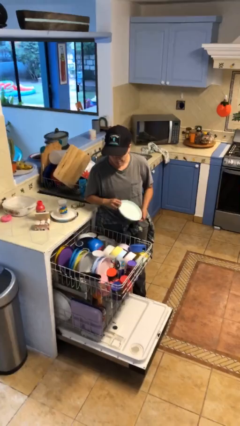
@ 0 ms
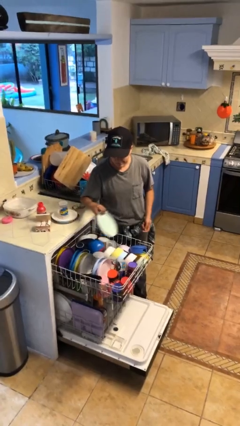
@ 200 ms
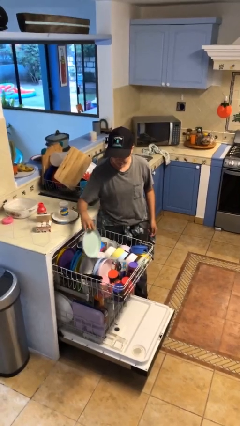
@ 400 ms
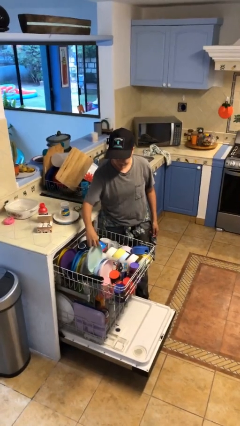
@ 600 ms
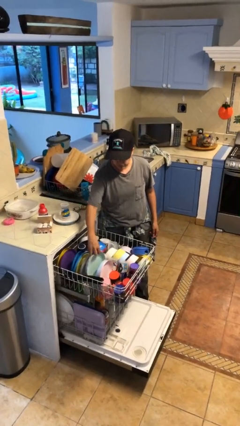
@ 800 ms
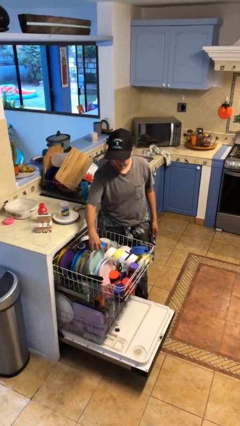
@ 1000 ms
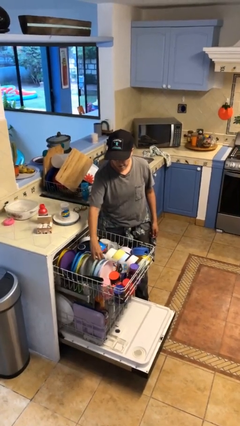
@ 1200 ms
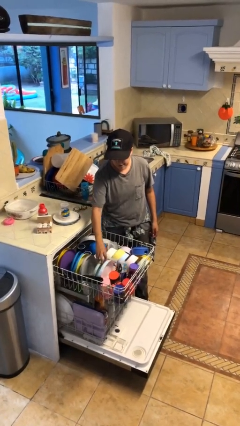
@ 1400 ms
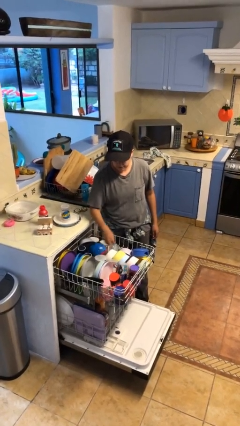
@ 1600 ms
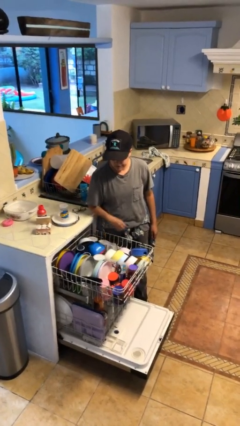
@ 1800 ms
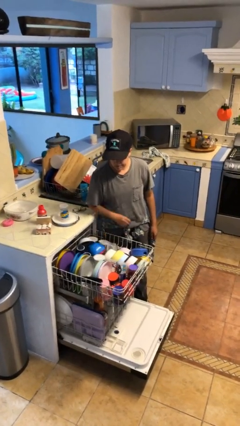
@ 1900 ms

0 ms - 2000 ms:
person loads dishwasher

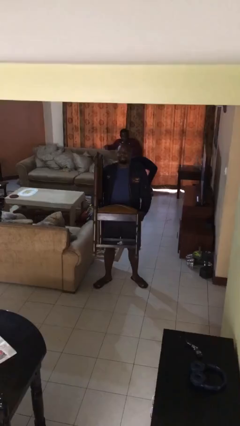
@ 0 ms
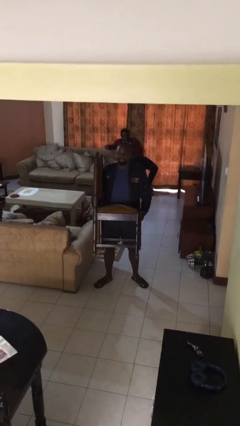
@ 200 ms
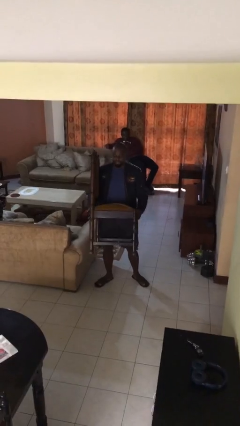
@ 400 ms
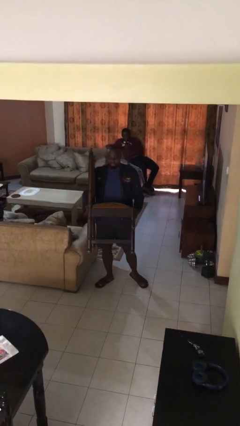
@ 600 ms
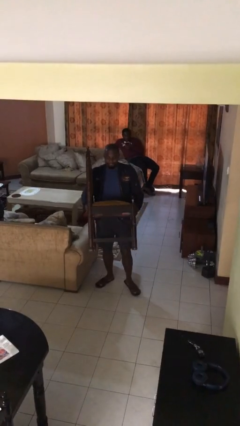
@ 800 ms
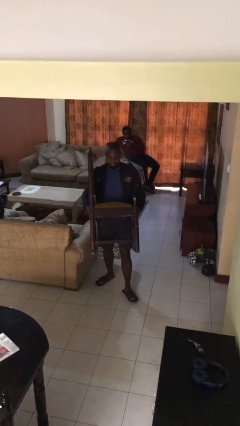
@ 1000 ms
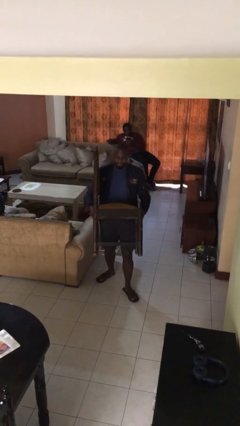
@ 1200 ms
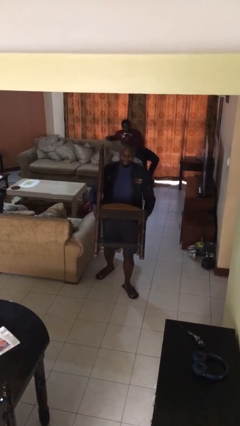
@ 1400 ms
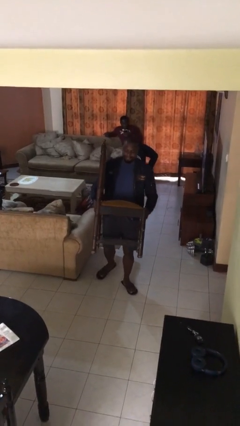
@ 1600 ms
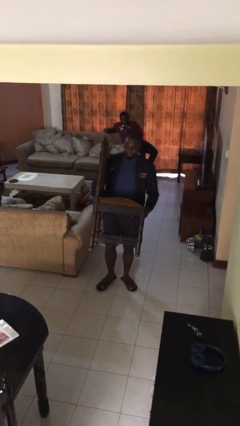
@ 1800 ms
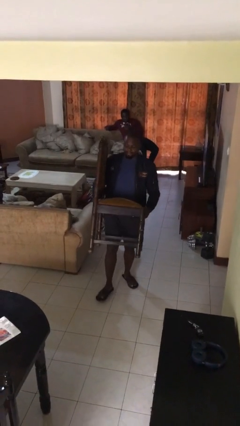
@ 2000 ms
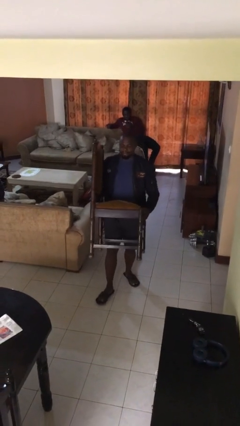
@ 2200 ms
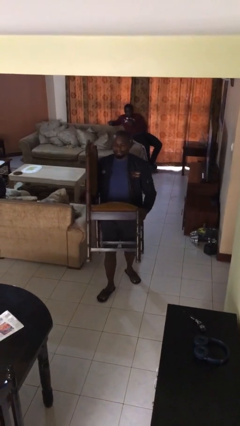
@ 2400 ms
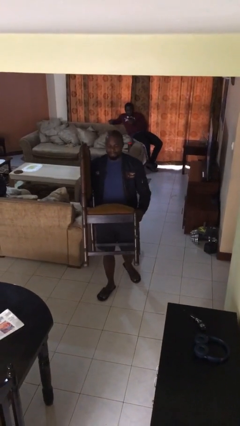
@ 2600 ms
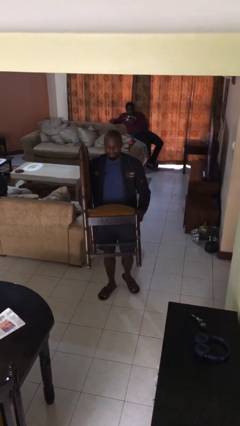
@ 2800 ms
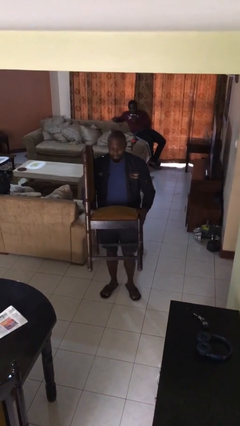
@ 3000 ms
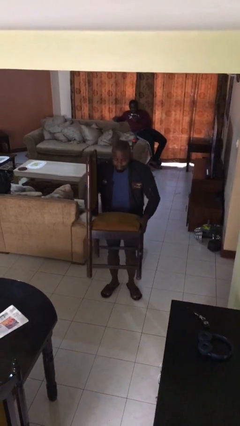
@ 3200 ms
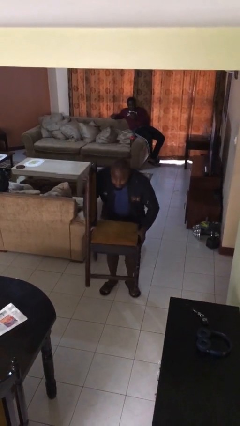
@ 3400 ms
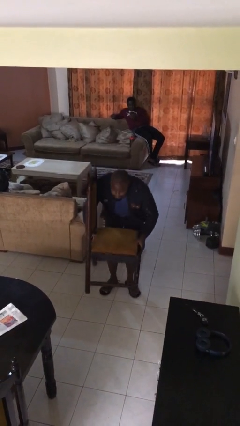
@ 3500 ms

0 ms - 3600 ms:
person carries heavy object

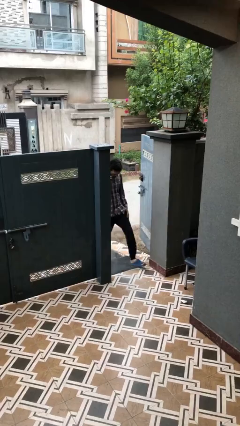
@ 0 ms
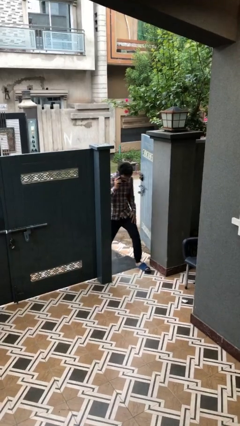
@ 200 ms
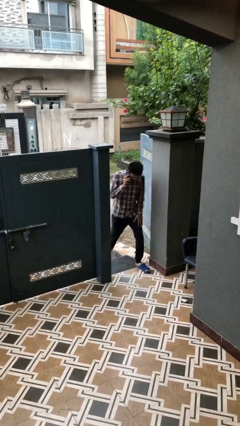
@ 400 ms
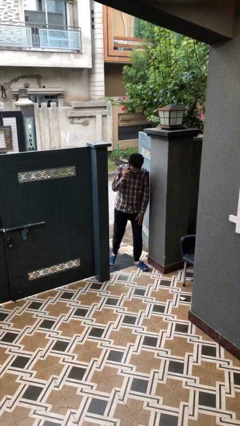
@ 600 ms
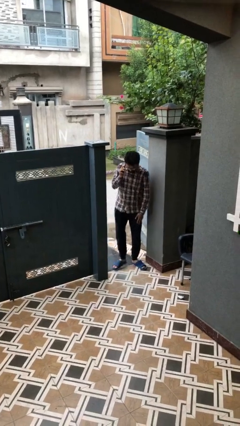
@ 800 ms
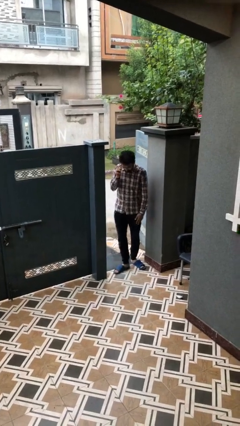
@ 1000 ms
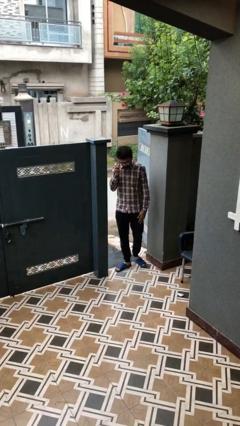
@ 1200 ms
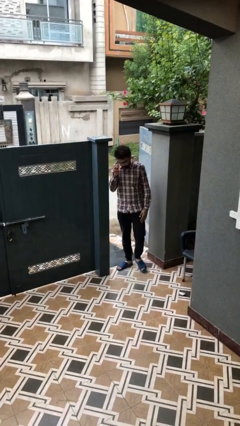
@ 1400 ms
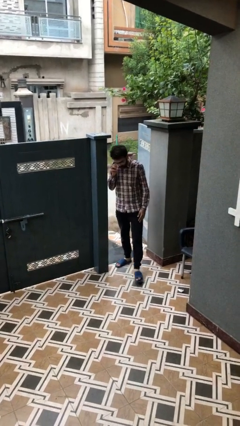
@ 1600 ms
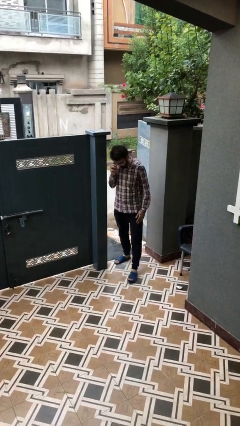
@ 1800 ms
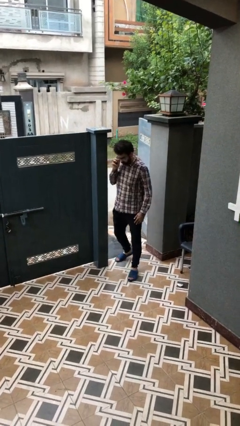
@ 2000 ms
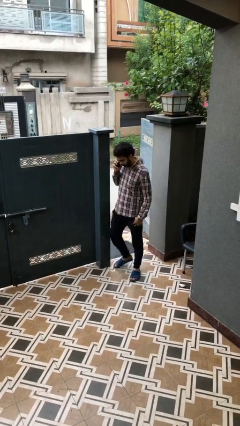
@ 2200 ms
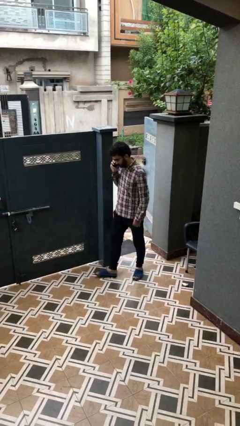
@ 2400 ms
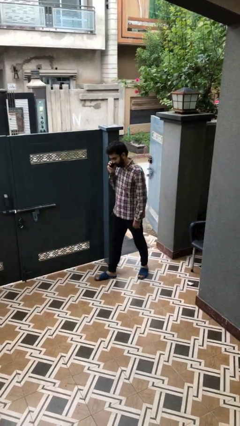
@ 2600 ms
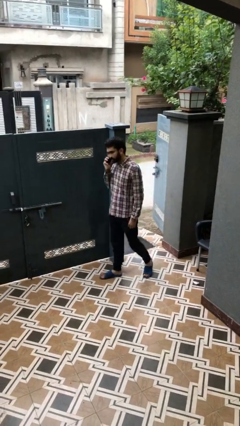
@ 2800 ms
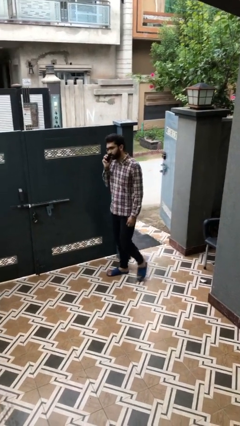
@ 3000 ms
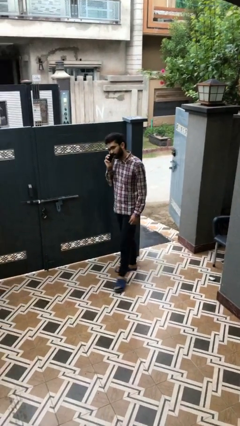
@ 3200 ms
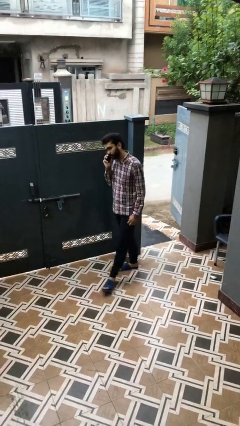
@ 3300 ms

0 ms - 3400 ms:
person enters scene through structure

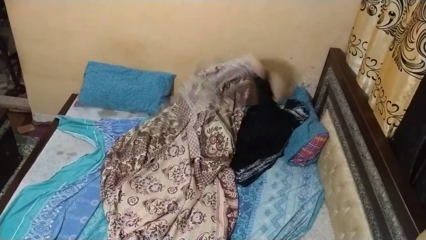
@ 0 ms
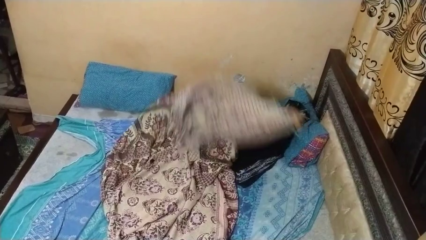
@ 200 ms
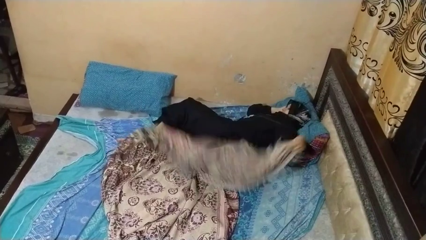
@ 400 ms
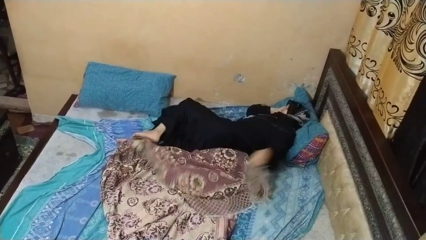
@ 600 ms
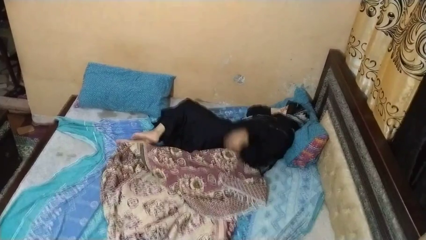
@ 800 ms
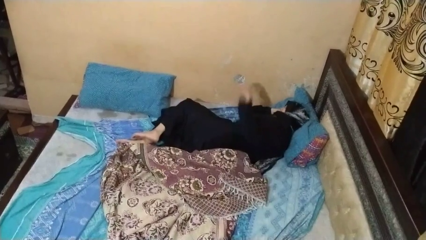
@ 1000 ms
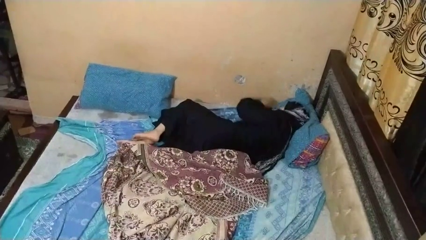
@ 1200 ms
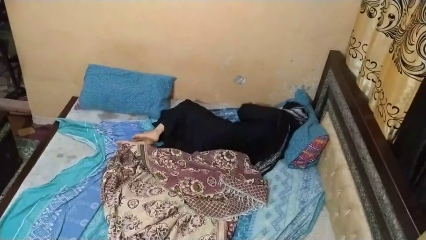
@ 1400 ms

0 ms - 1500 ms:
person uncovers with blanket

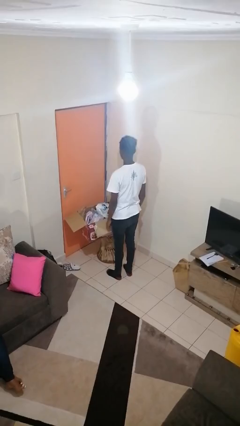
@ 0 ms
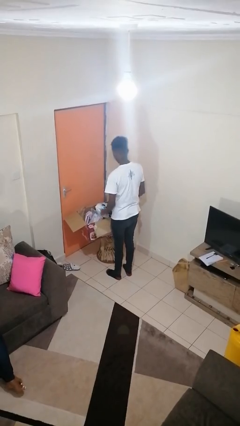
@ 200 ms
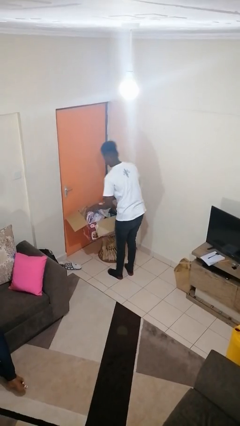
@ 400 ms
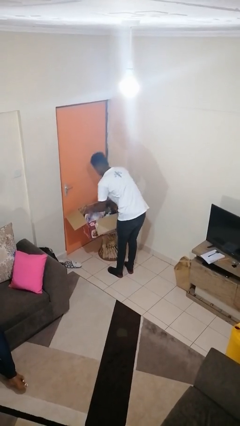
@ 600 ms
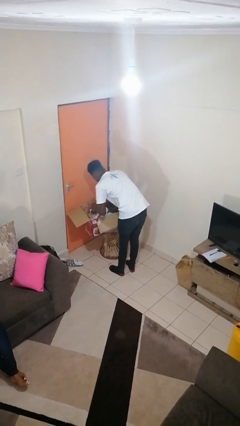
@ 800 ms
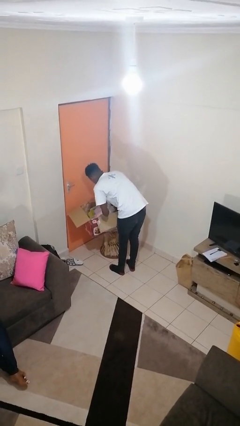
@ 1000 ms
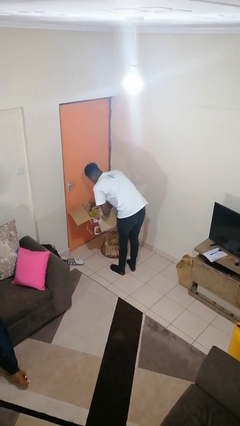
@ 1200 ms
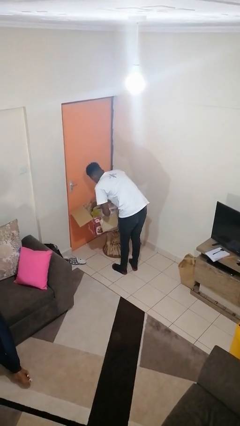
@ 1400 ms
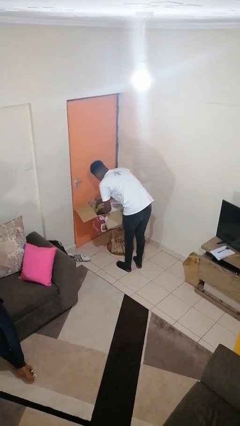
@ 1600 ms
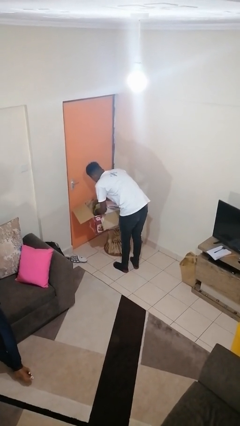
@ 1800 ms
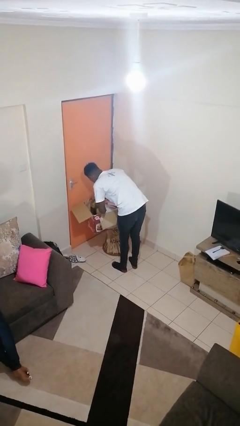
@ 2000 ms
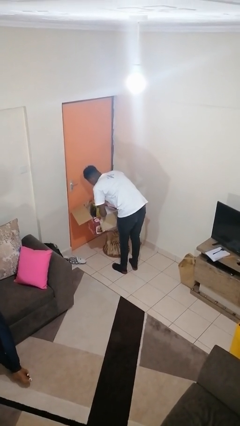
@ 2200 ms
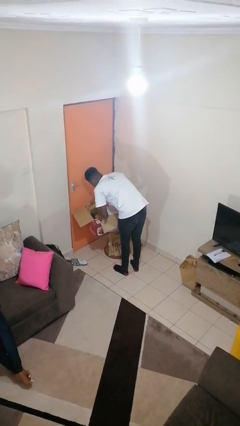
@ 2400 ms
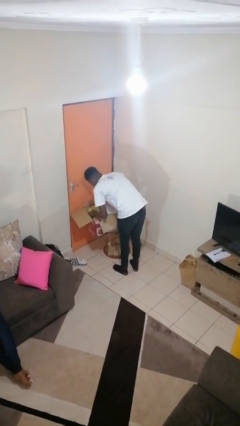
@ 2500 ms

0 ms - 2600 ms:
person searches in box

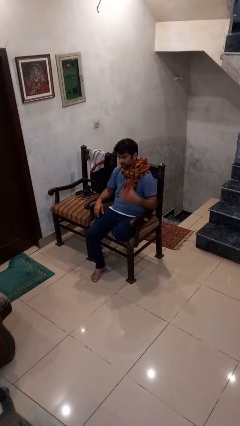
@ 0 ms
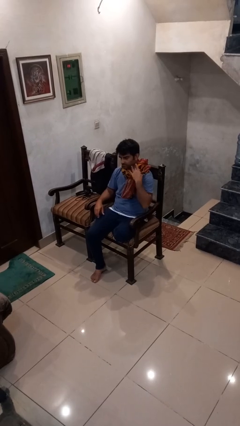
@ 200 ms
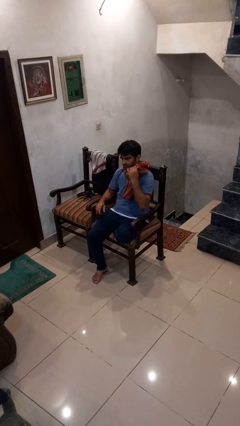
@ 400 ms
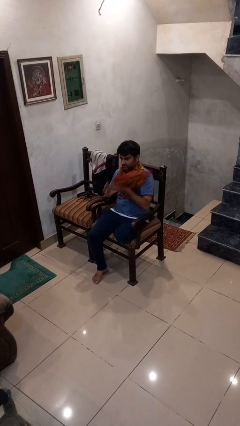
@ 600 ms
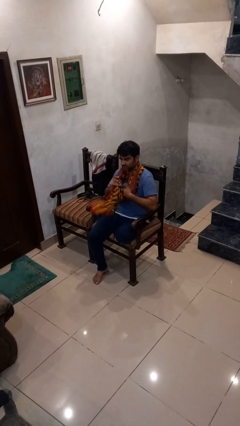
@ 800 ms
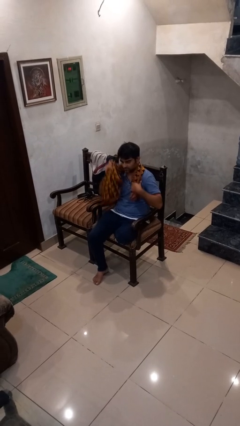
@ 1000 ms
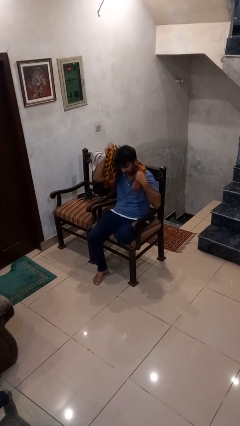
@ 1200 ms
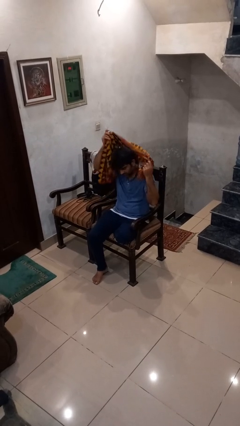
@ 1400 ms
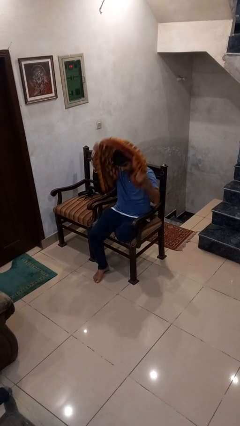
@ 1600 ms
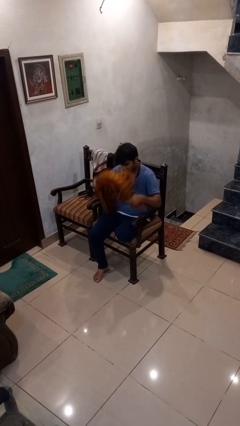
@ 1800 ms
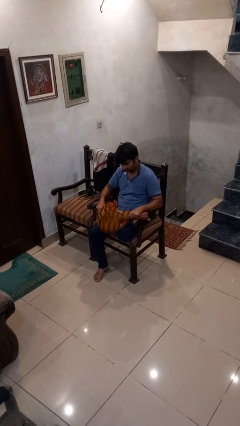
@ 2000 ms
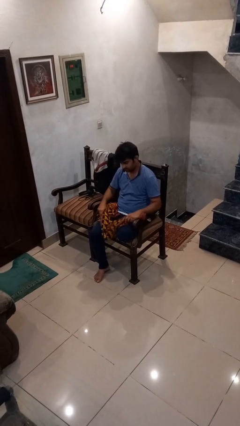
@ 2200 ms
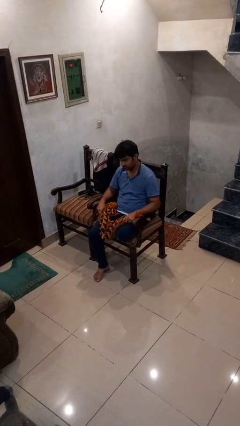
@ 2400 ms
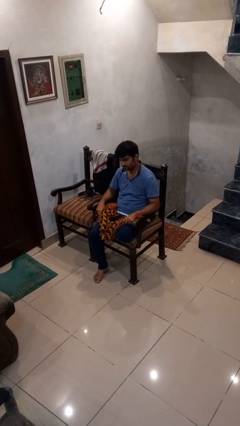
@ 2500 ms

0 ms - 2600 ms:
person takes off scarf

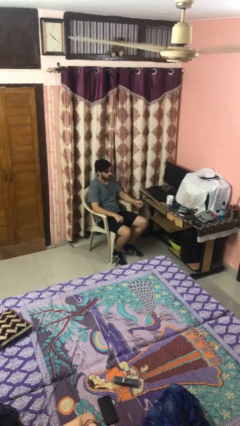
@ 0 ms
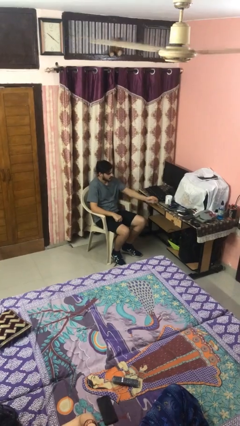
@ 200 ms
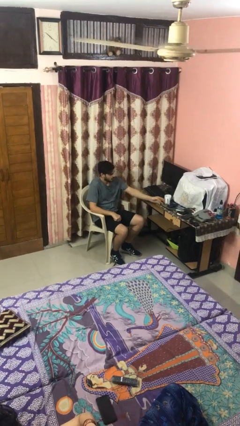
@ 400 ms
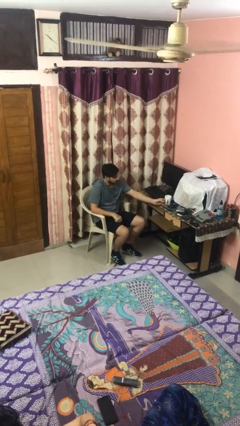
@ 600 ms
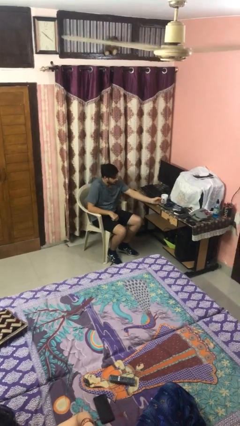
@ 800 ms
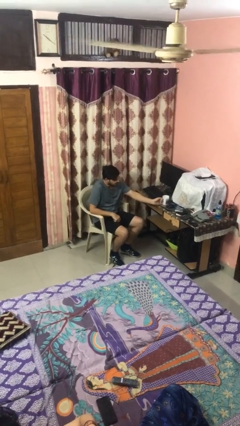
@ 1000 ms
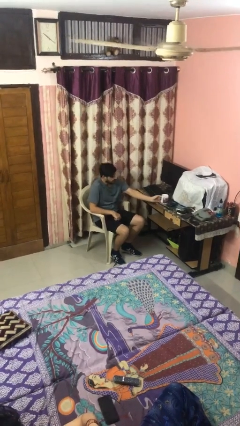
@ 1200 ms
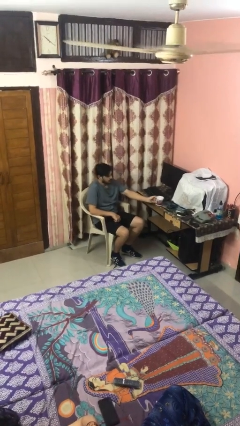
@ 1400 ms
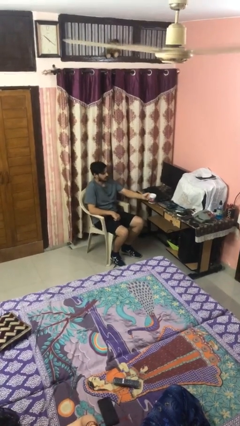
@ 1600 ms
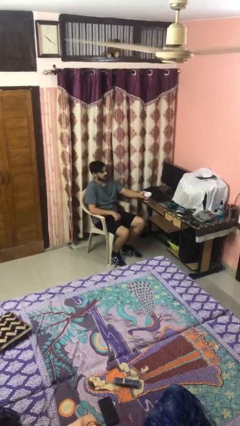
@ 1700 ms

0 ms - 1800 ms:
person picks up object from table
